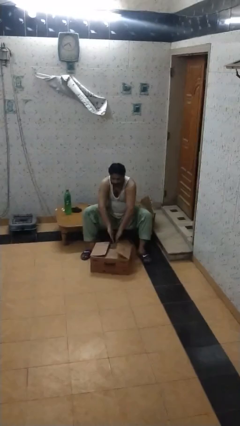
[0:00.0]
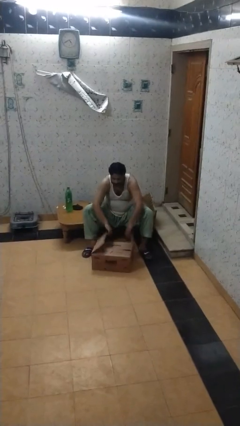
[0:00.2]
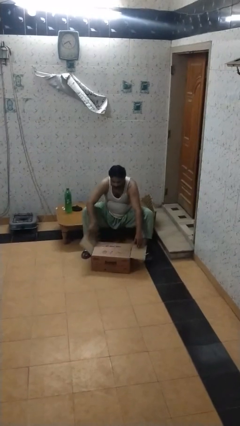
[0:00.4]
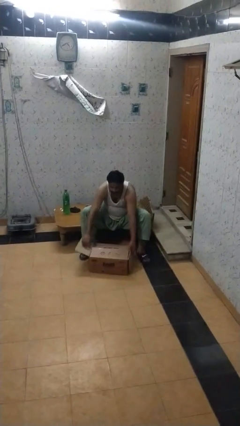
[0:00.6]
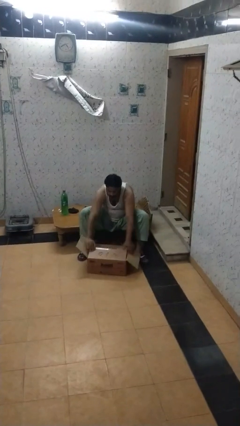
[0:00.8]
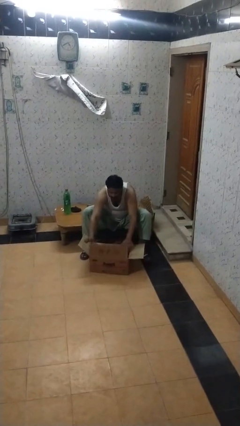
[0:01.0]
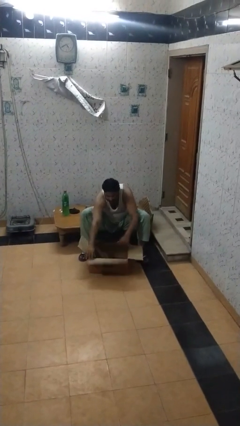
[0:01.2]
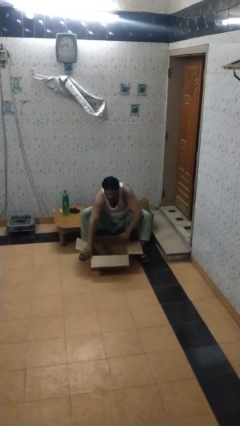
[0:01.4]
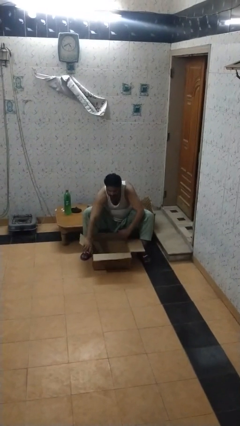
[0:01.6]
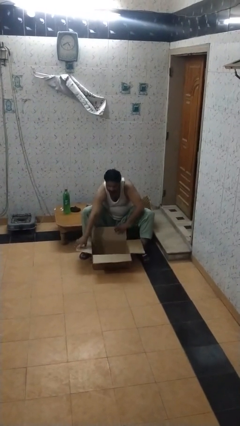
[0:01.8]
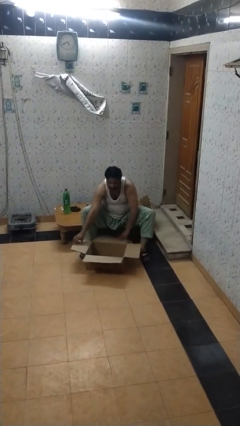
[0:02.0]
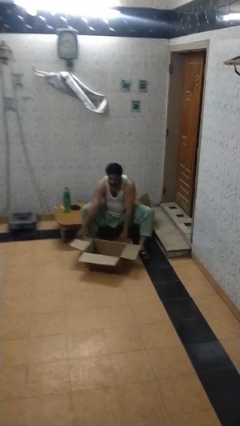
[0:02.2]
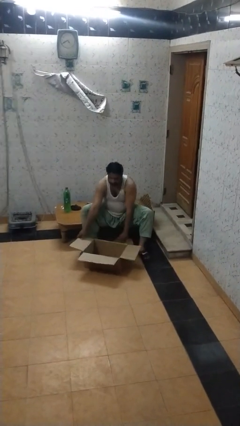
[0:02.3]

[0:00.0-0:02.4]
person opens box

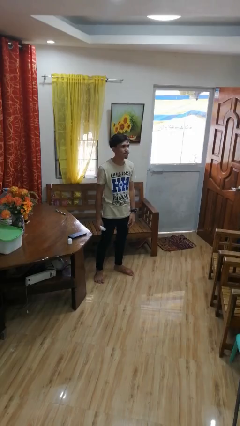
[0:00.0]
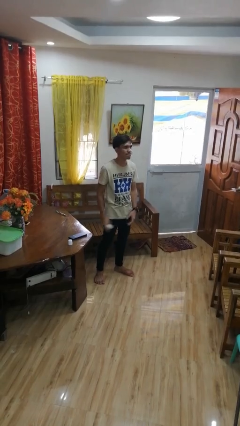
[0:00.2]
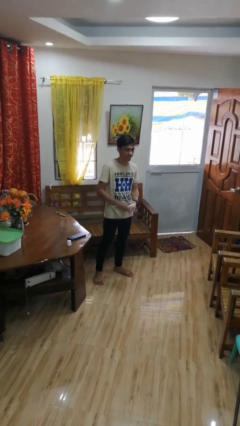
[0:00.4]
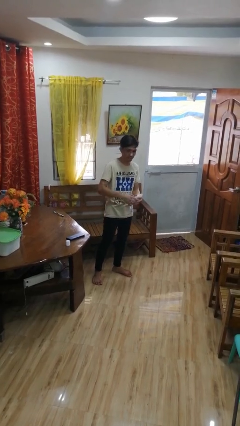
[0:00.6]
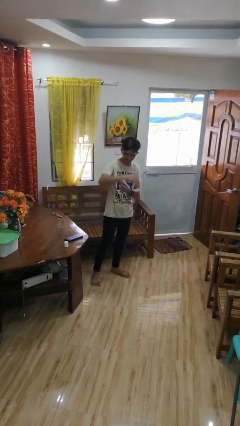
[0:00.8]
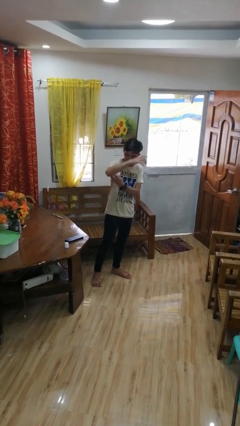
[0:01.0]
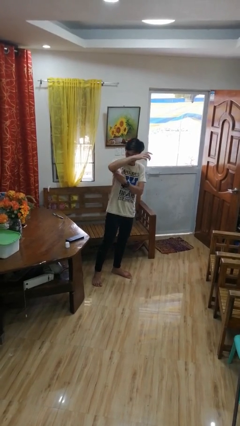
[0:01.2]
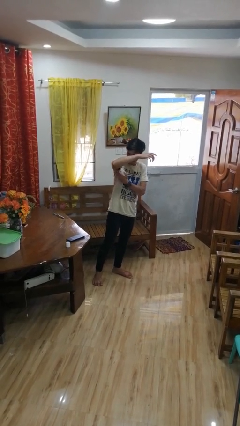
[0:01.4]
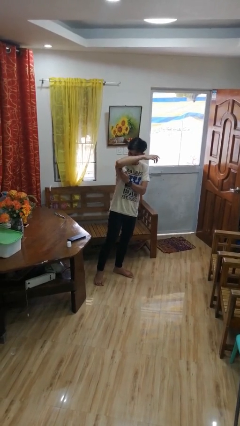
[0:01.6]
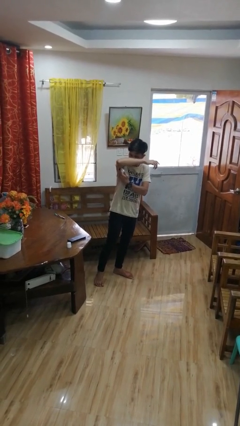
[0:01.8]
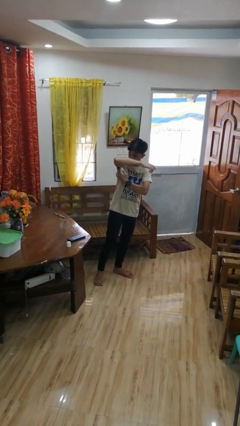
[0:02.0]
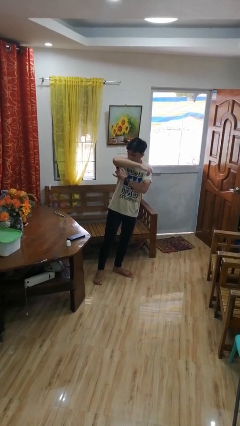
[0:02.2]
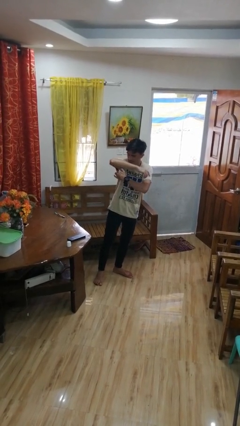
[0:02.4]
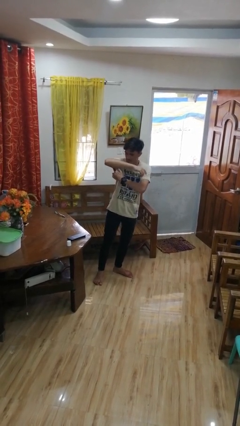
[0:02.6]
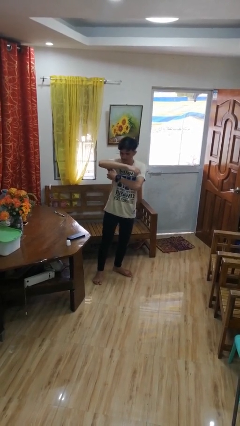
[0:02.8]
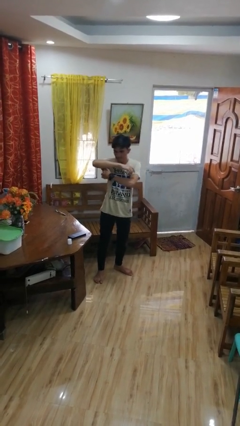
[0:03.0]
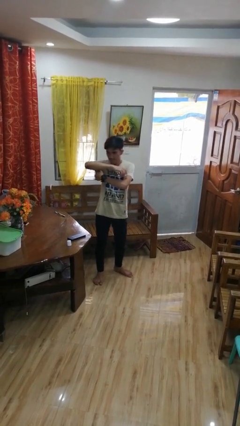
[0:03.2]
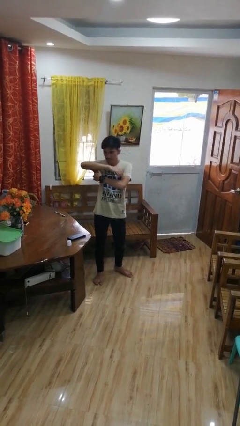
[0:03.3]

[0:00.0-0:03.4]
person applies deodorant

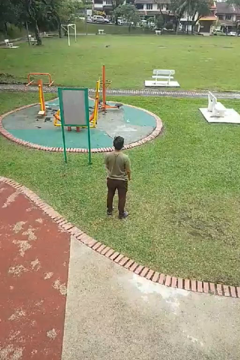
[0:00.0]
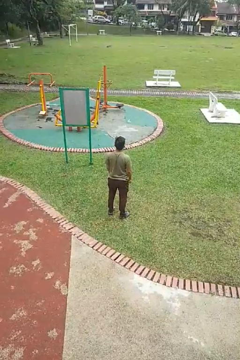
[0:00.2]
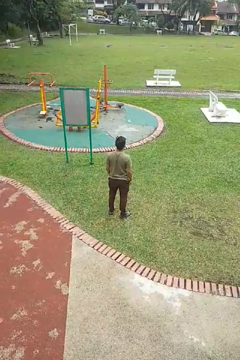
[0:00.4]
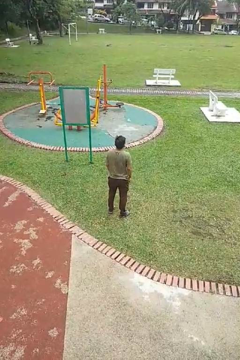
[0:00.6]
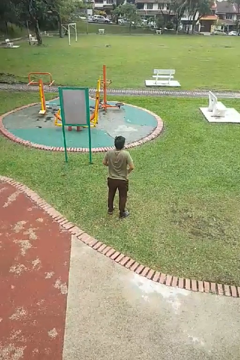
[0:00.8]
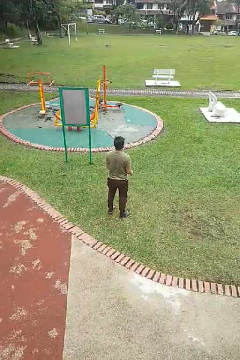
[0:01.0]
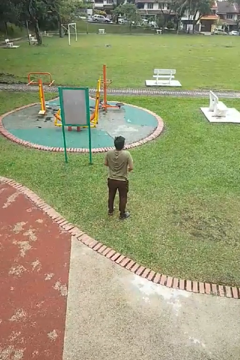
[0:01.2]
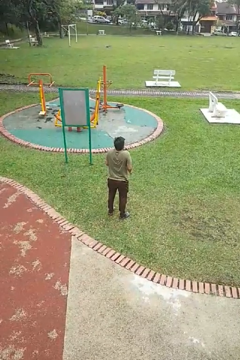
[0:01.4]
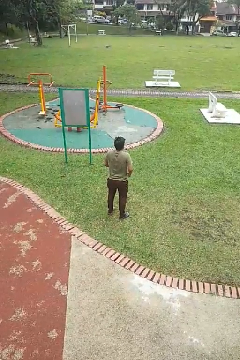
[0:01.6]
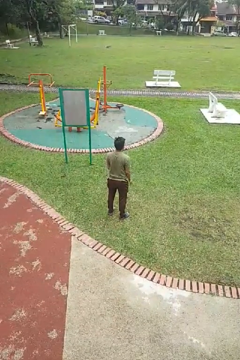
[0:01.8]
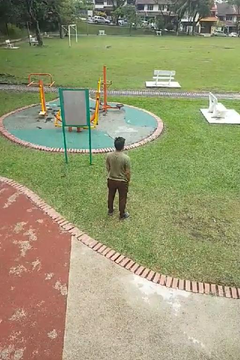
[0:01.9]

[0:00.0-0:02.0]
person shrugs

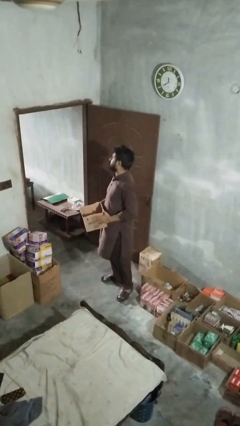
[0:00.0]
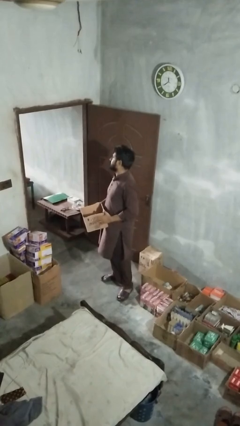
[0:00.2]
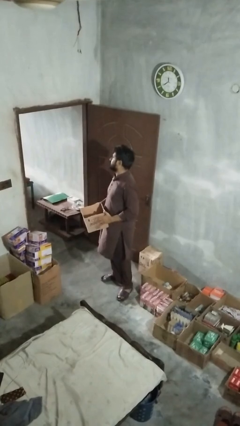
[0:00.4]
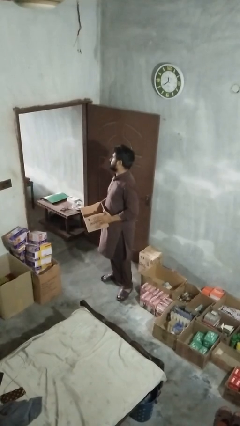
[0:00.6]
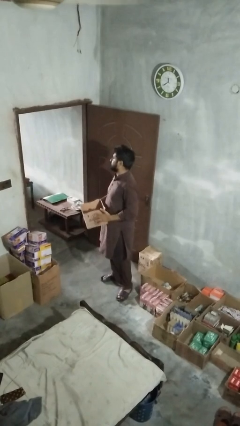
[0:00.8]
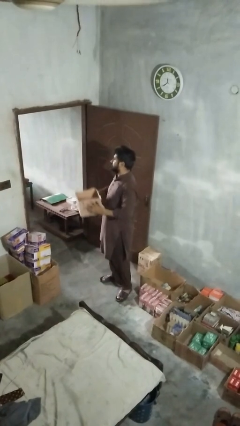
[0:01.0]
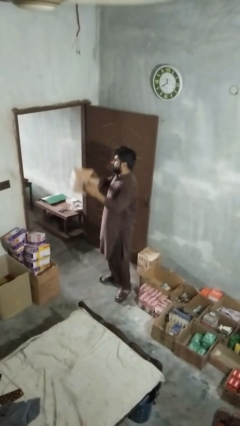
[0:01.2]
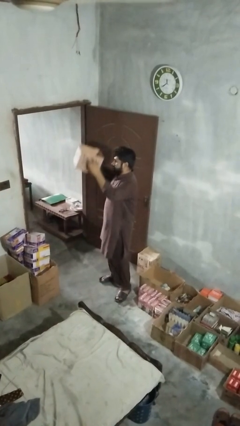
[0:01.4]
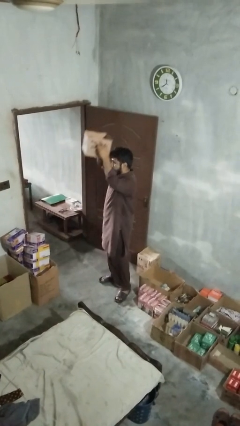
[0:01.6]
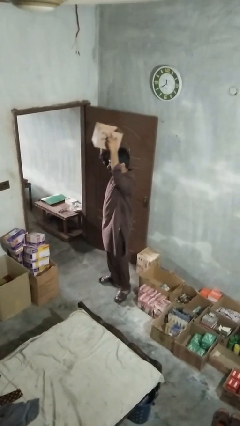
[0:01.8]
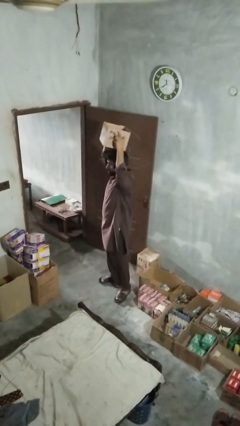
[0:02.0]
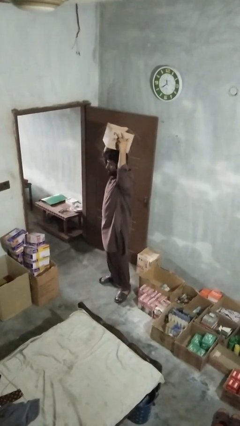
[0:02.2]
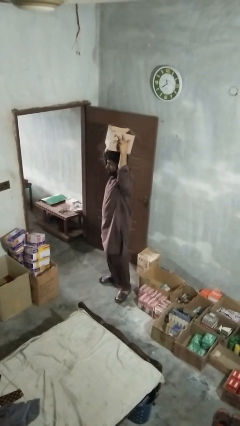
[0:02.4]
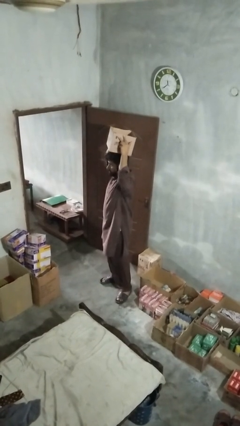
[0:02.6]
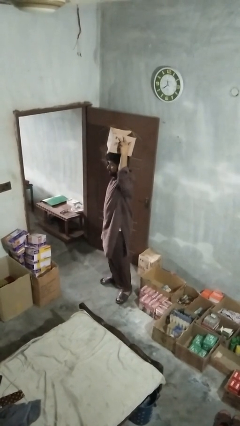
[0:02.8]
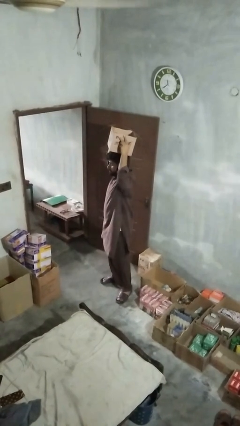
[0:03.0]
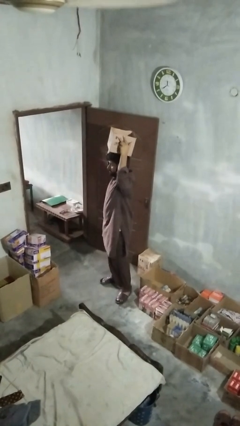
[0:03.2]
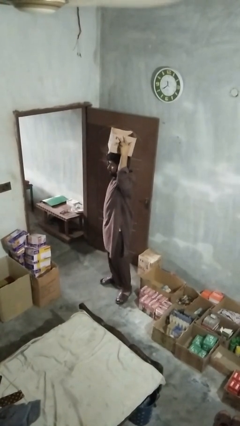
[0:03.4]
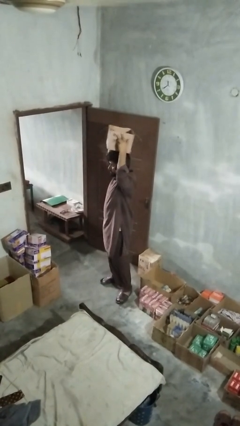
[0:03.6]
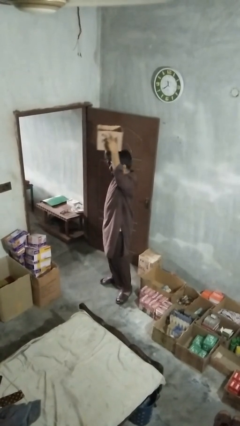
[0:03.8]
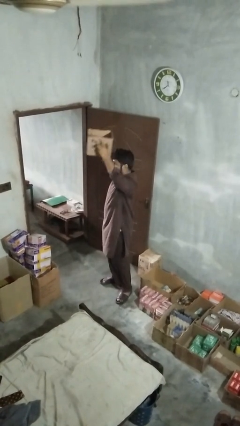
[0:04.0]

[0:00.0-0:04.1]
person holds object above head

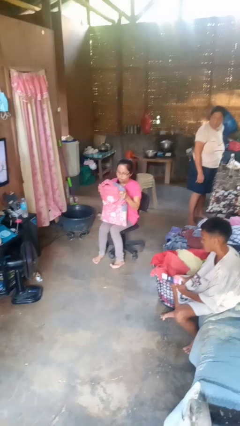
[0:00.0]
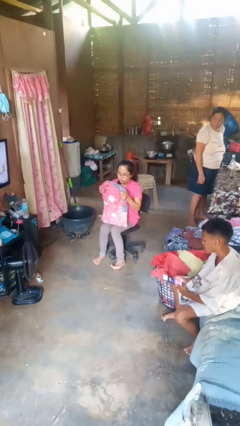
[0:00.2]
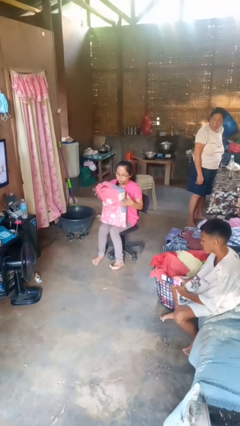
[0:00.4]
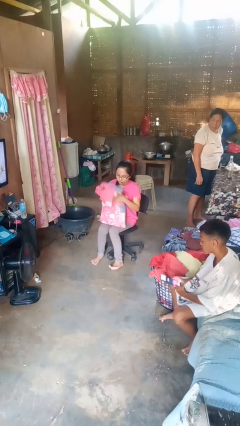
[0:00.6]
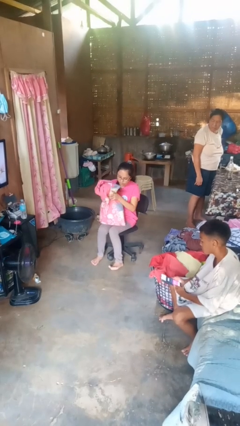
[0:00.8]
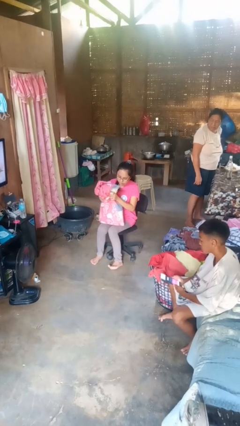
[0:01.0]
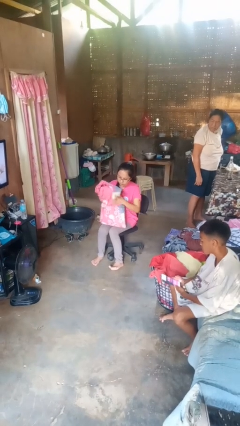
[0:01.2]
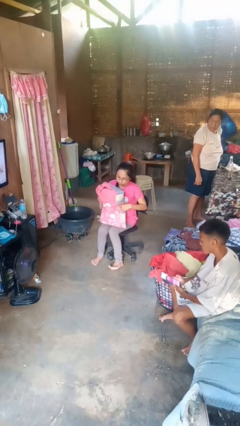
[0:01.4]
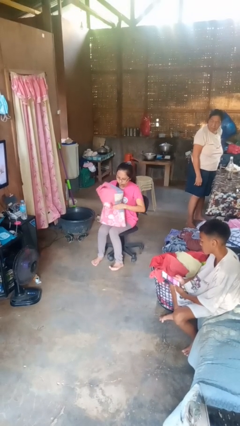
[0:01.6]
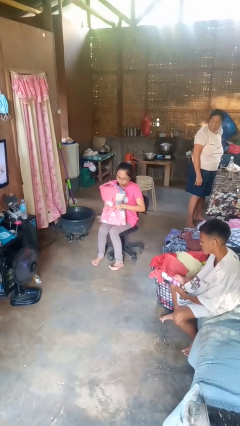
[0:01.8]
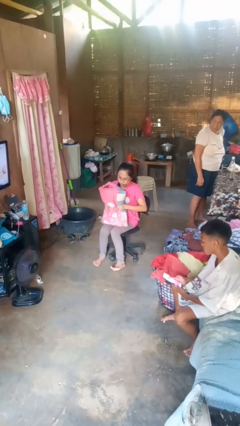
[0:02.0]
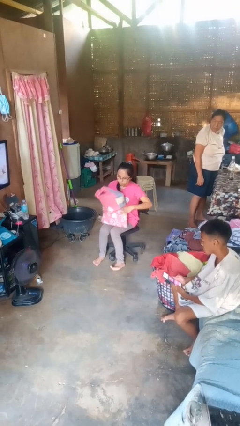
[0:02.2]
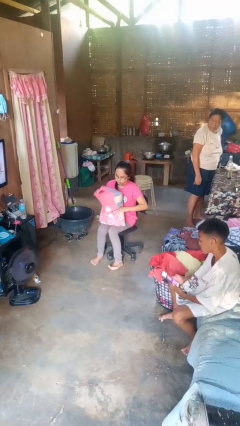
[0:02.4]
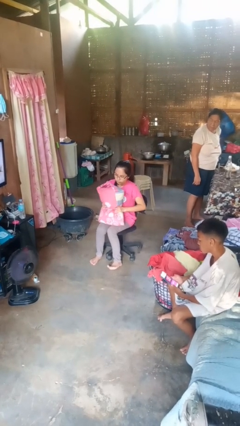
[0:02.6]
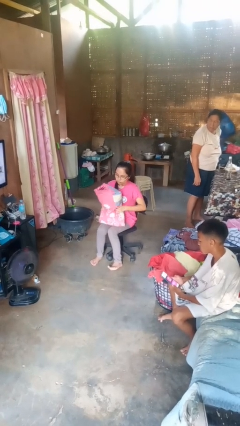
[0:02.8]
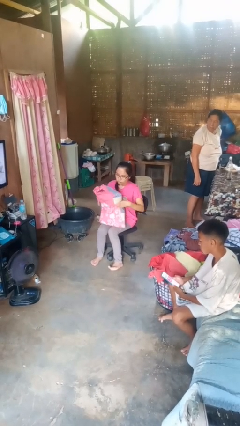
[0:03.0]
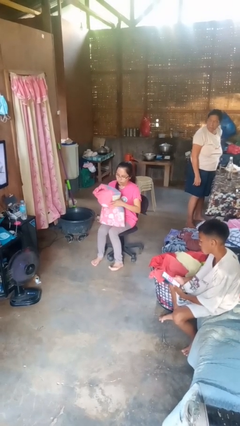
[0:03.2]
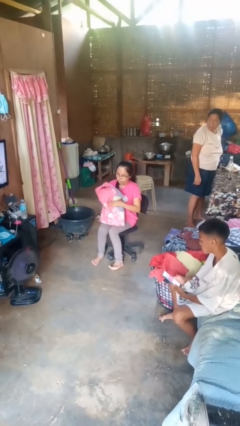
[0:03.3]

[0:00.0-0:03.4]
person squeezes object

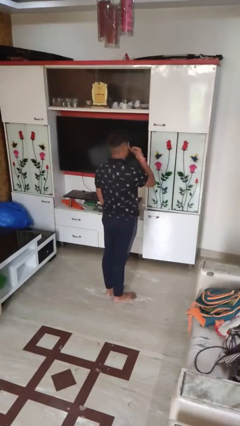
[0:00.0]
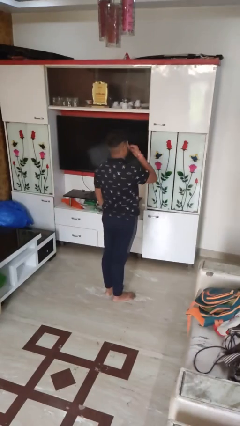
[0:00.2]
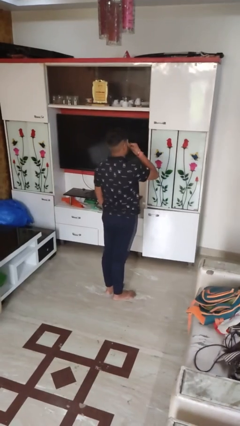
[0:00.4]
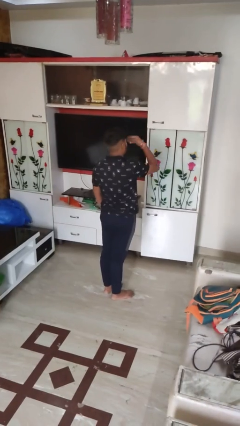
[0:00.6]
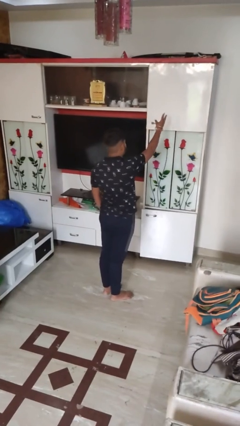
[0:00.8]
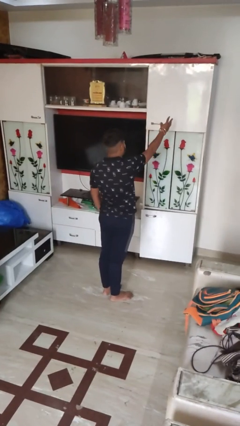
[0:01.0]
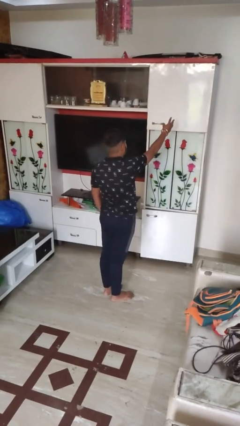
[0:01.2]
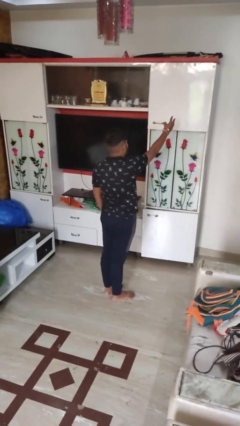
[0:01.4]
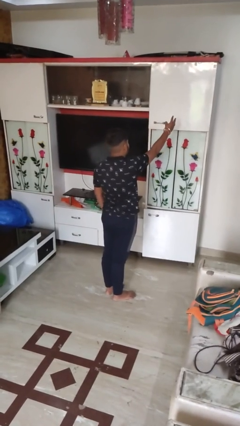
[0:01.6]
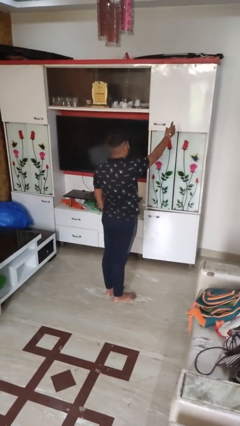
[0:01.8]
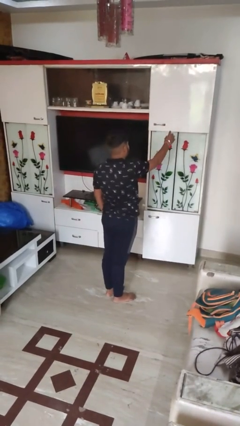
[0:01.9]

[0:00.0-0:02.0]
person gestures blow kiss

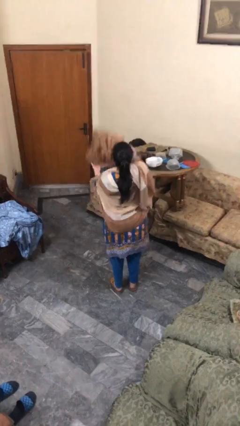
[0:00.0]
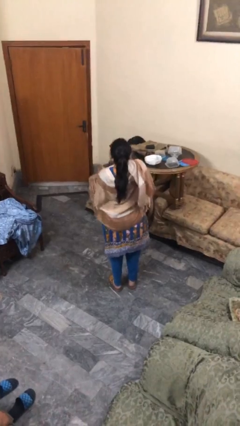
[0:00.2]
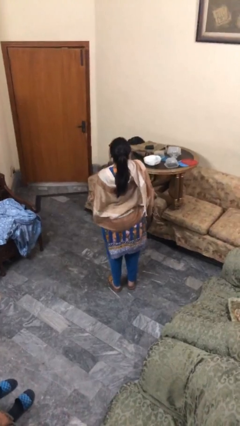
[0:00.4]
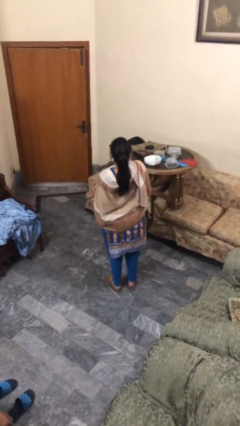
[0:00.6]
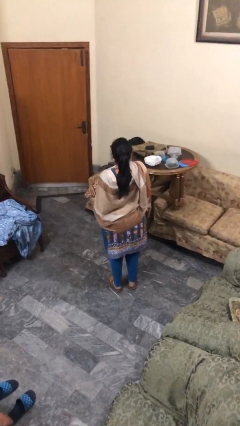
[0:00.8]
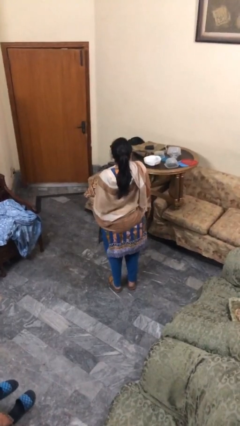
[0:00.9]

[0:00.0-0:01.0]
person catches dropped object
